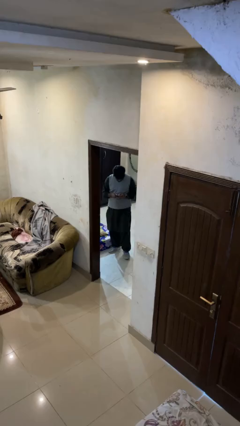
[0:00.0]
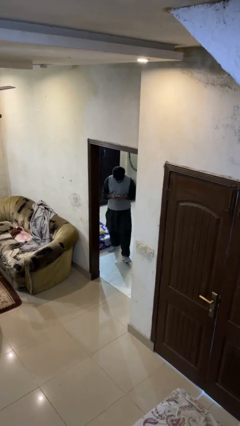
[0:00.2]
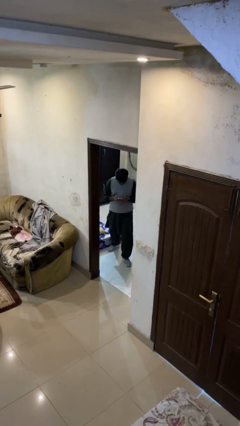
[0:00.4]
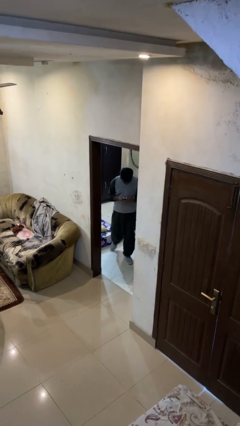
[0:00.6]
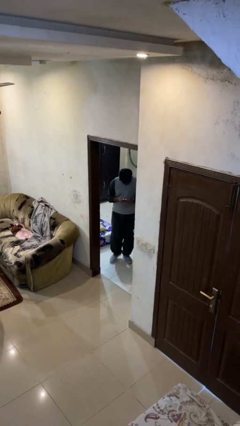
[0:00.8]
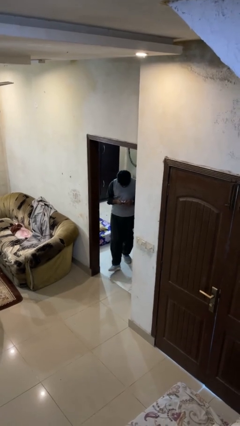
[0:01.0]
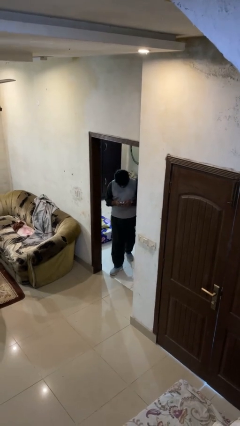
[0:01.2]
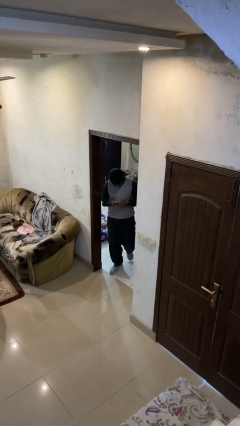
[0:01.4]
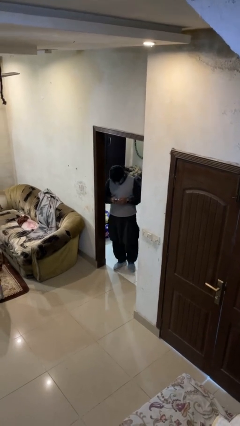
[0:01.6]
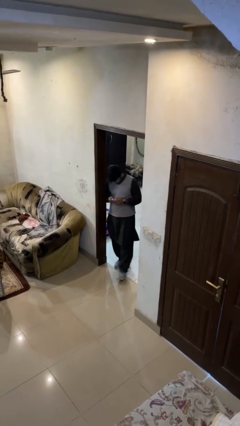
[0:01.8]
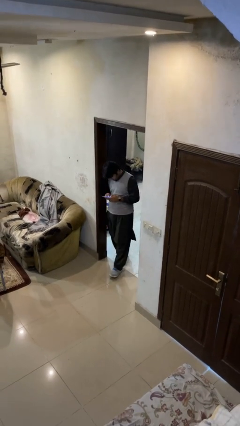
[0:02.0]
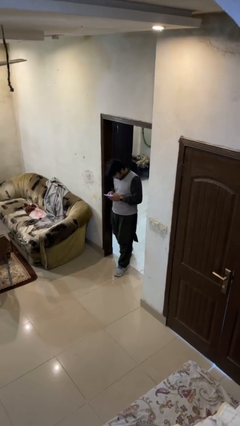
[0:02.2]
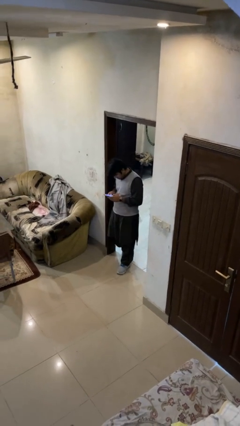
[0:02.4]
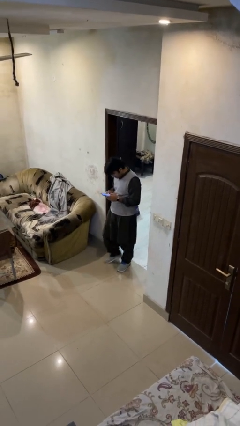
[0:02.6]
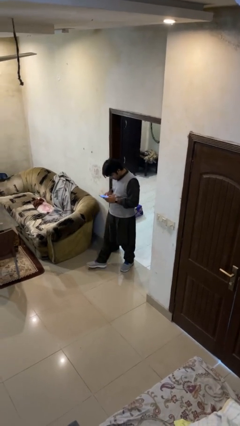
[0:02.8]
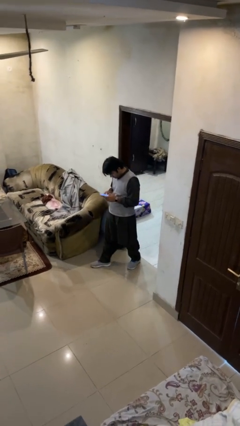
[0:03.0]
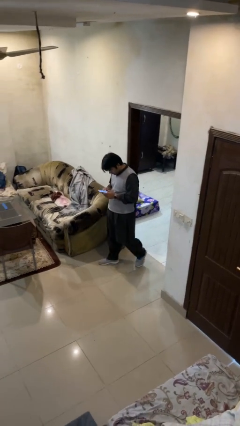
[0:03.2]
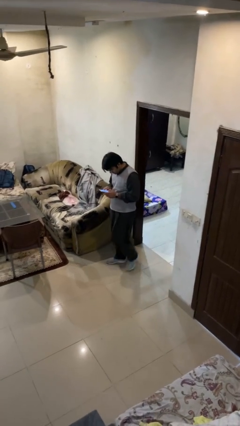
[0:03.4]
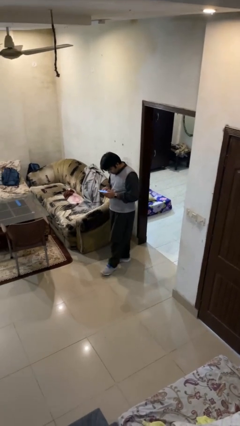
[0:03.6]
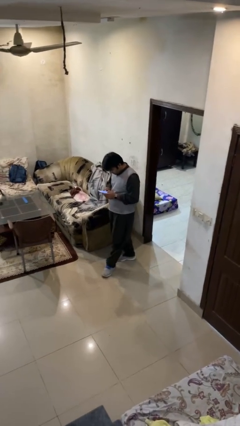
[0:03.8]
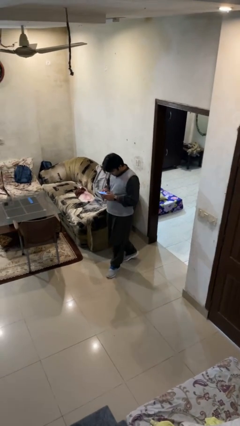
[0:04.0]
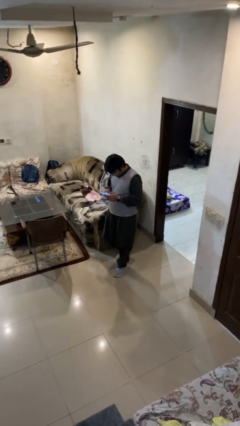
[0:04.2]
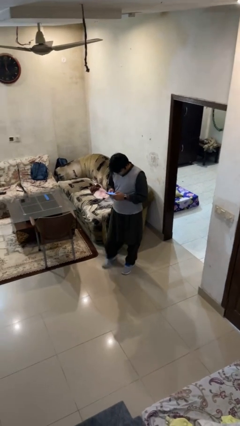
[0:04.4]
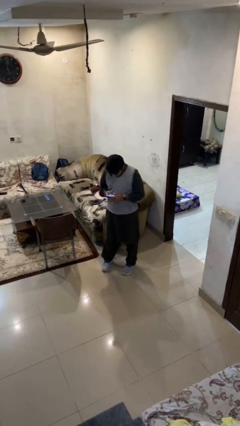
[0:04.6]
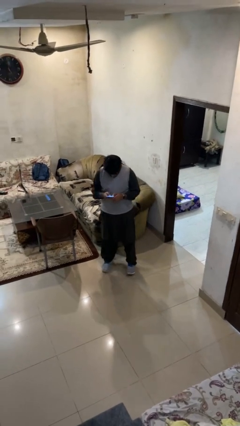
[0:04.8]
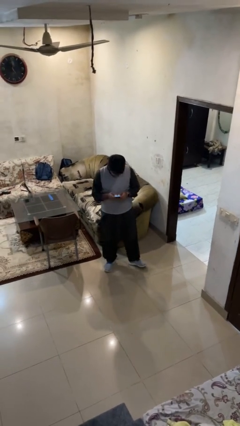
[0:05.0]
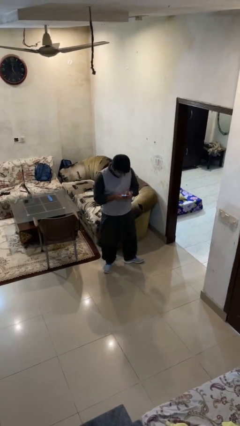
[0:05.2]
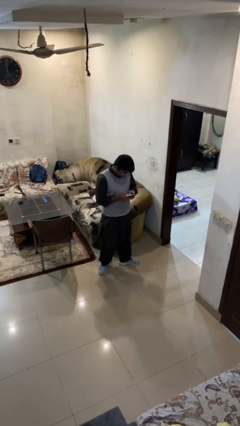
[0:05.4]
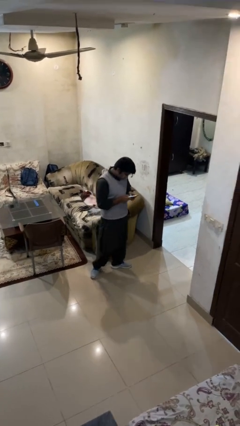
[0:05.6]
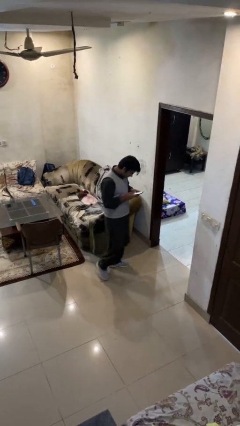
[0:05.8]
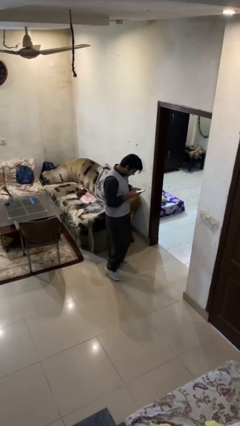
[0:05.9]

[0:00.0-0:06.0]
person enters scene through structure

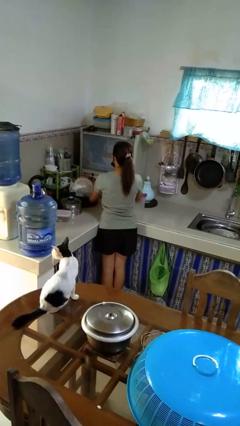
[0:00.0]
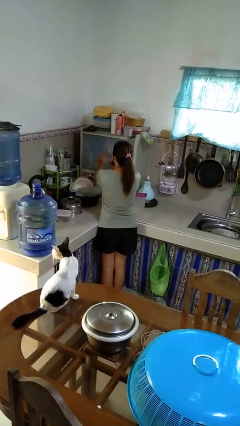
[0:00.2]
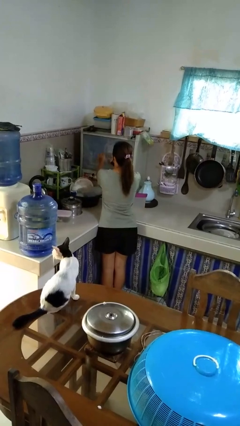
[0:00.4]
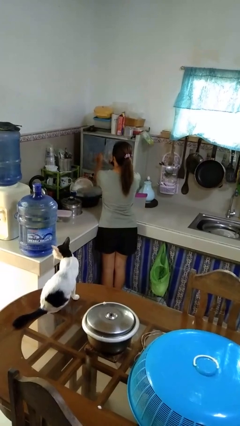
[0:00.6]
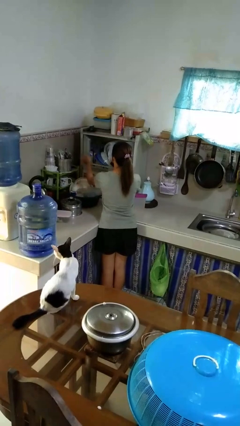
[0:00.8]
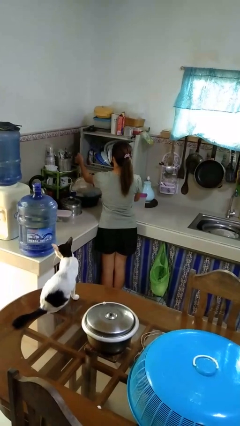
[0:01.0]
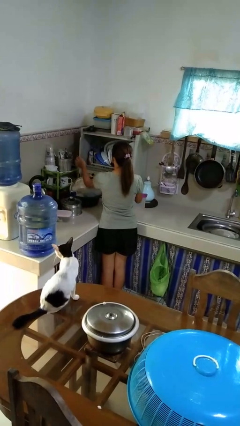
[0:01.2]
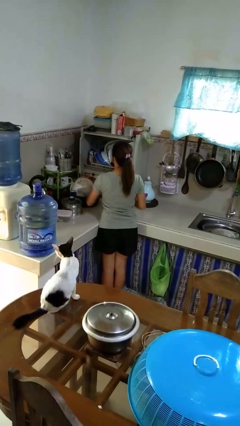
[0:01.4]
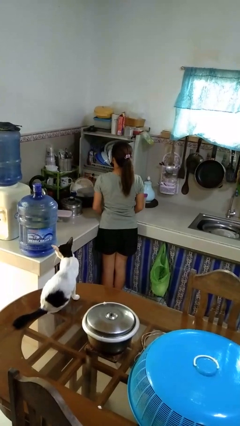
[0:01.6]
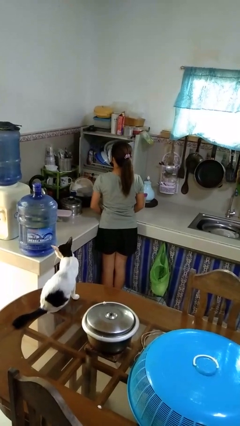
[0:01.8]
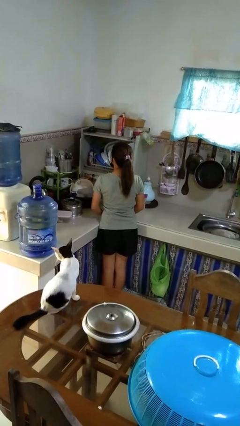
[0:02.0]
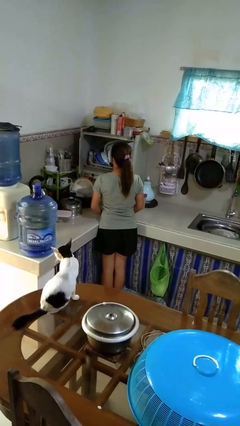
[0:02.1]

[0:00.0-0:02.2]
person opens kitchen drawer

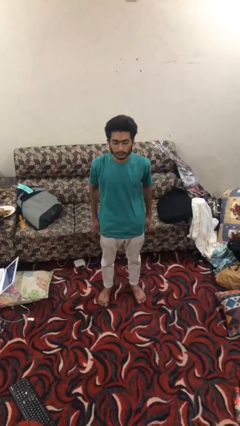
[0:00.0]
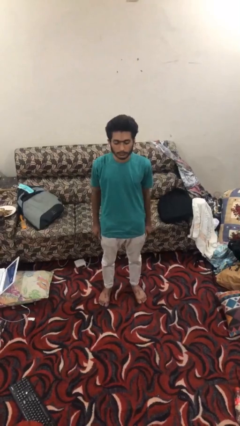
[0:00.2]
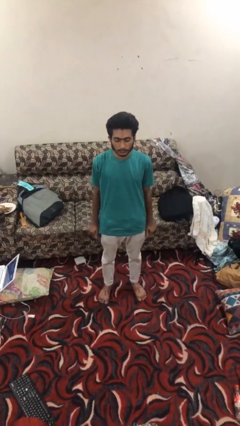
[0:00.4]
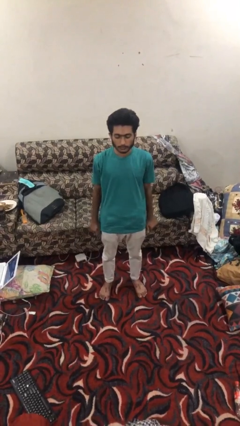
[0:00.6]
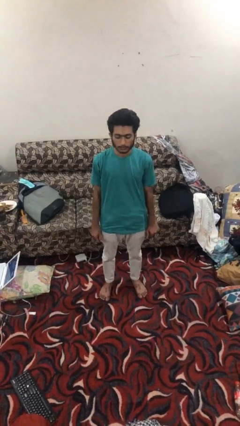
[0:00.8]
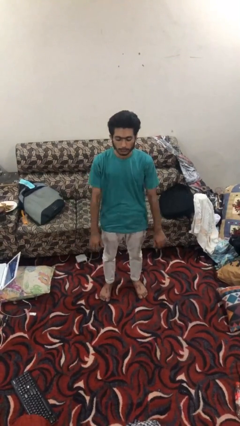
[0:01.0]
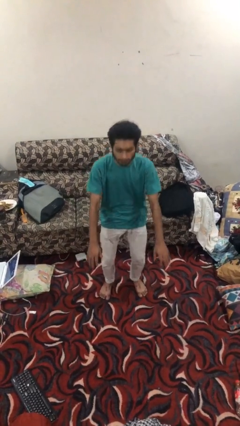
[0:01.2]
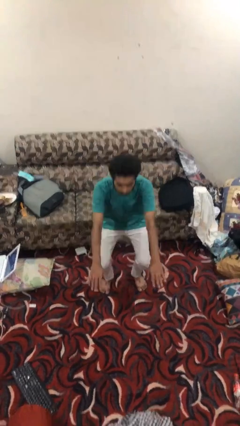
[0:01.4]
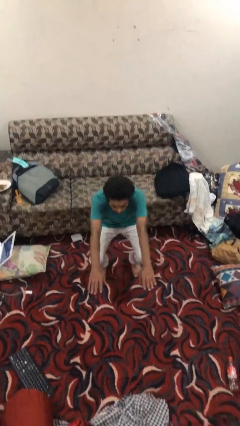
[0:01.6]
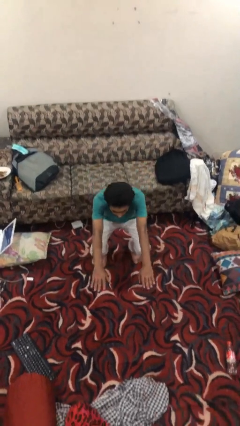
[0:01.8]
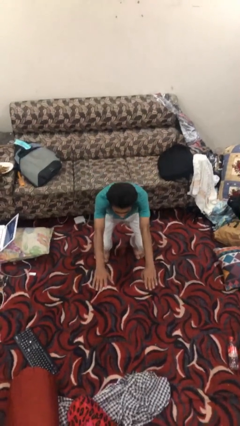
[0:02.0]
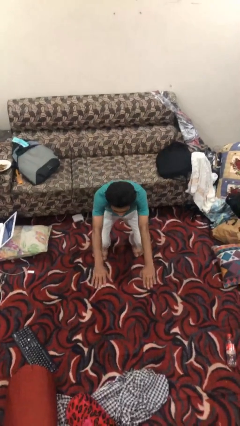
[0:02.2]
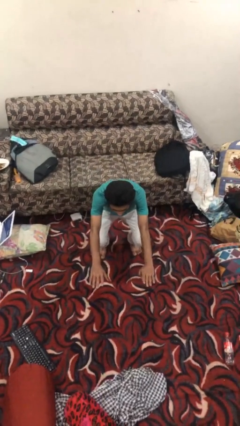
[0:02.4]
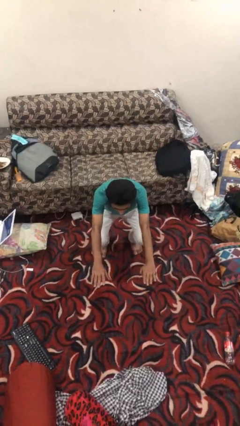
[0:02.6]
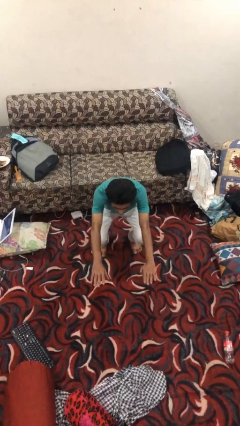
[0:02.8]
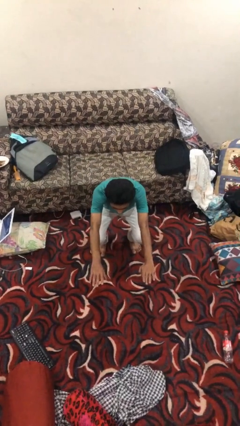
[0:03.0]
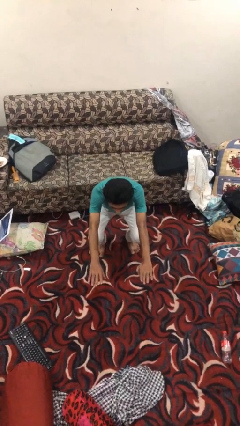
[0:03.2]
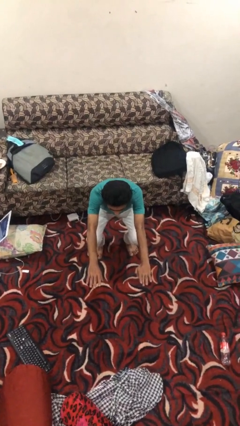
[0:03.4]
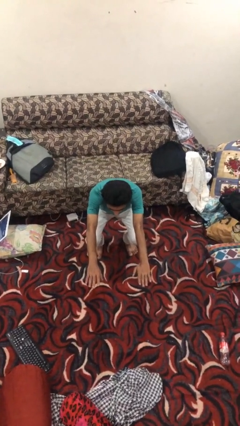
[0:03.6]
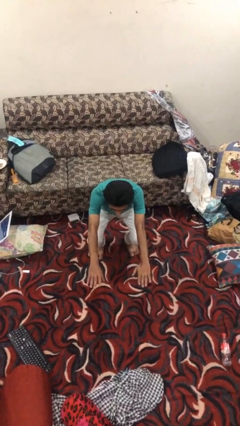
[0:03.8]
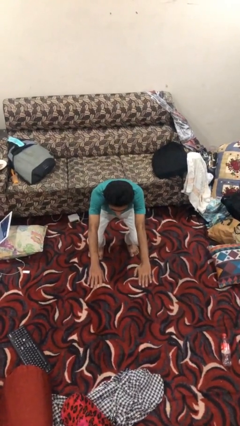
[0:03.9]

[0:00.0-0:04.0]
person squats

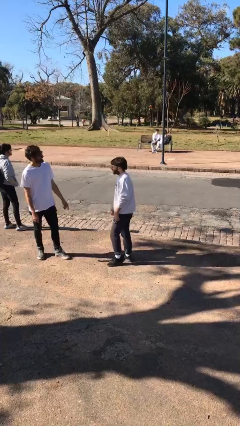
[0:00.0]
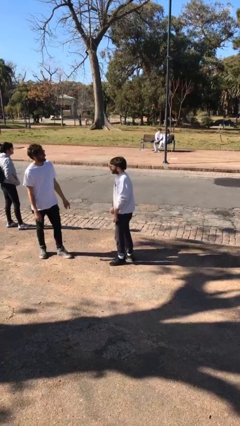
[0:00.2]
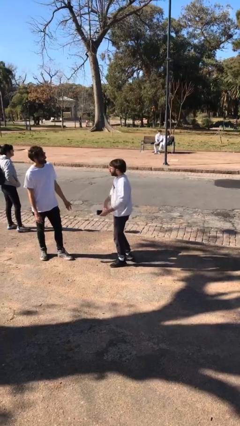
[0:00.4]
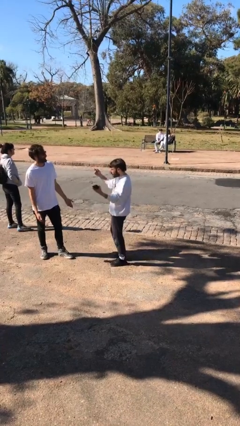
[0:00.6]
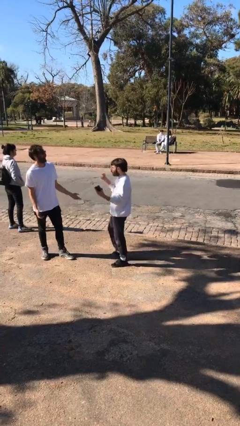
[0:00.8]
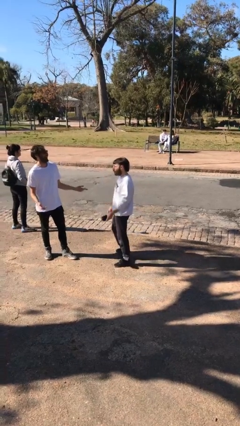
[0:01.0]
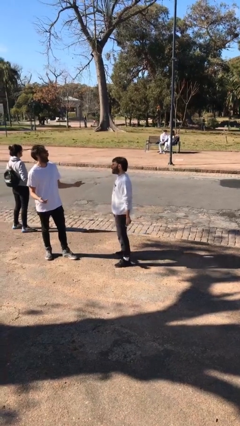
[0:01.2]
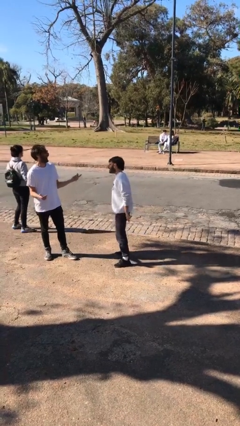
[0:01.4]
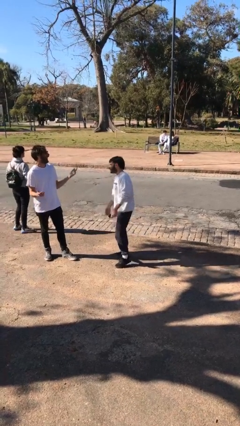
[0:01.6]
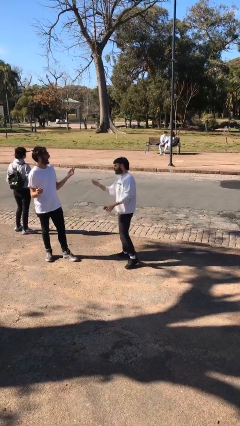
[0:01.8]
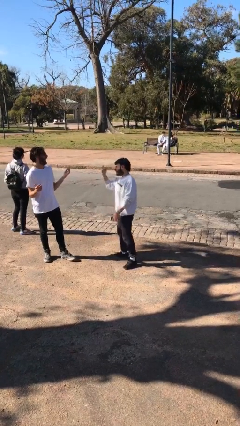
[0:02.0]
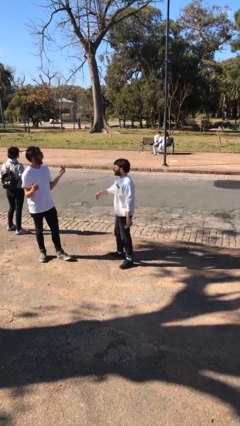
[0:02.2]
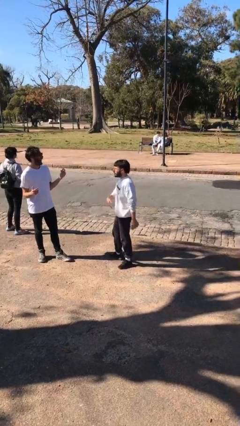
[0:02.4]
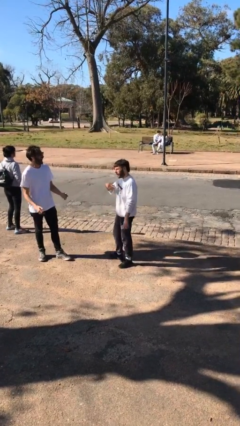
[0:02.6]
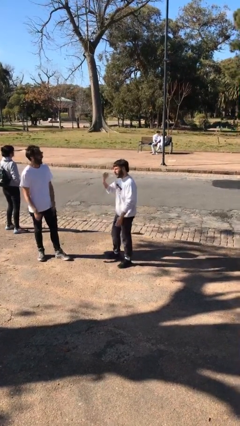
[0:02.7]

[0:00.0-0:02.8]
person laughs with person

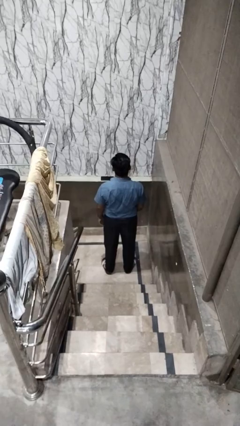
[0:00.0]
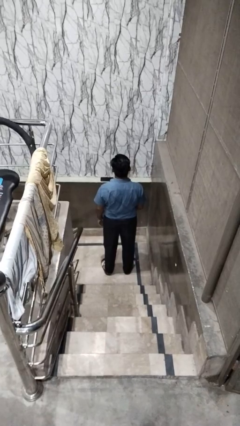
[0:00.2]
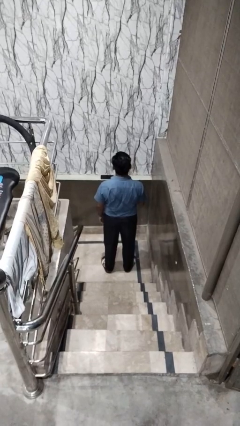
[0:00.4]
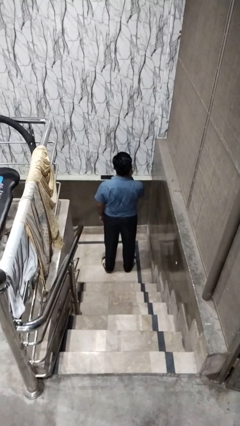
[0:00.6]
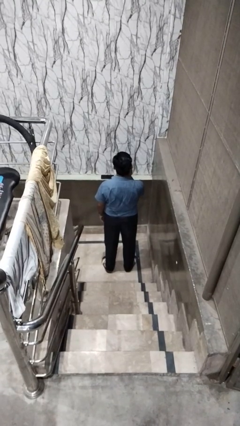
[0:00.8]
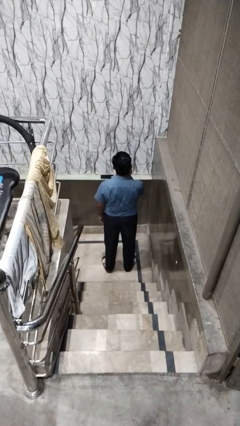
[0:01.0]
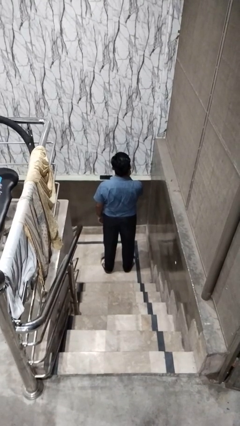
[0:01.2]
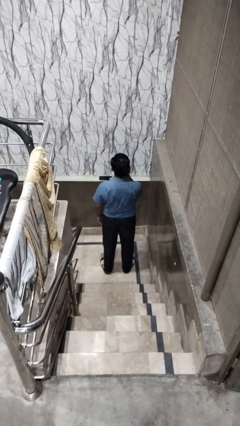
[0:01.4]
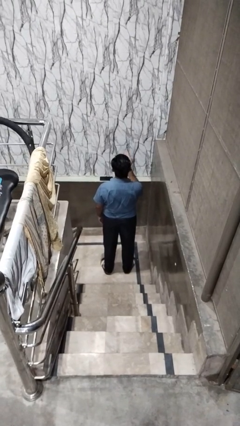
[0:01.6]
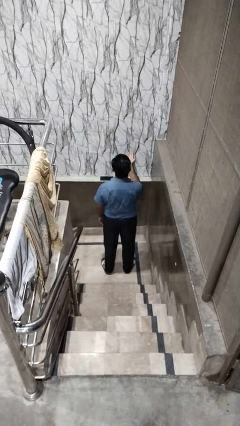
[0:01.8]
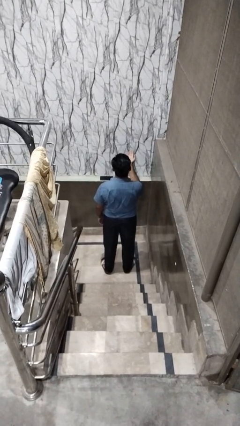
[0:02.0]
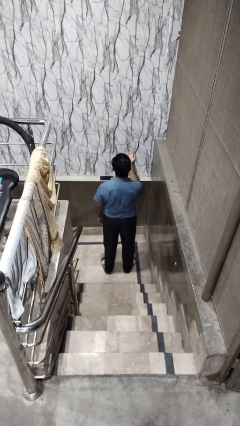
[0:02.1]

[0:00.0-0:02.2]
person gestures blow kiss
